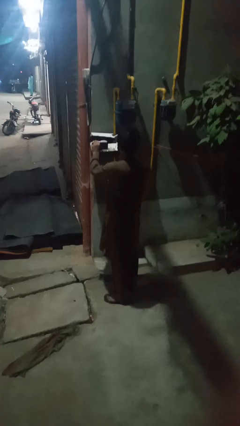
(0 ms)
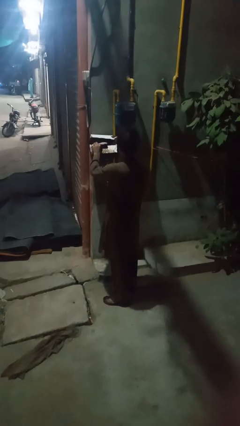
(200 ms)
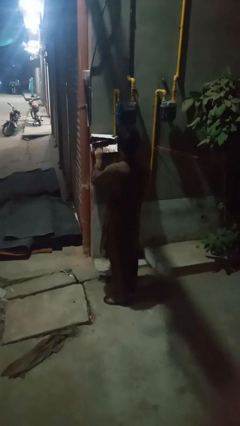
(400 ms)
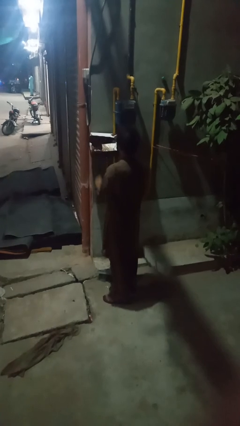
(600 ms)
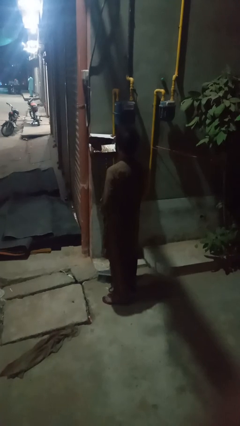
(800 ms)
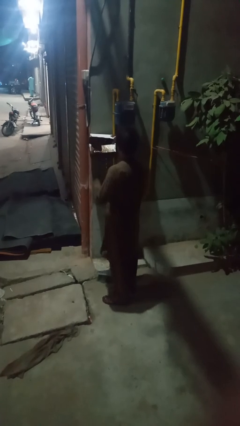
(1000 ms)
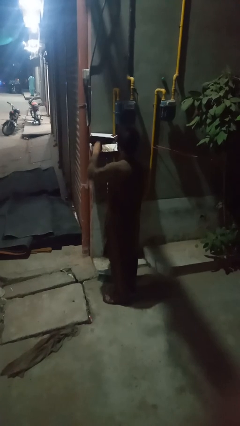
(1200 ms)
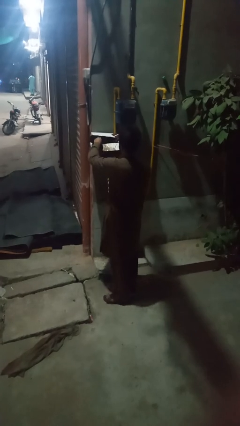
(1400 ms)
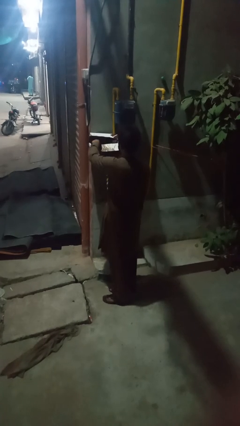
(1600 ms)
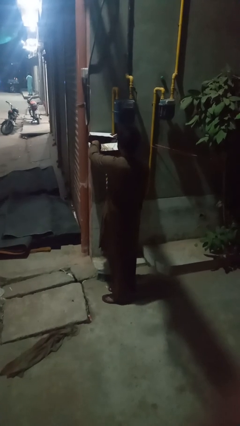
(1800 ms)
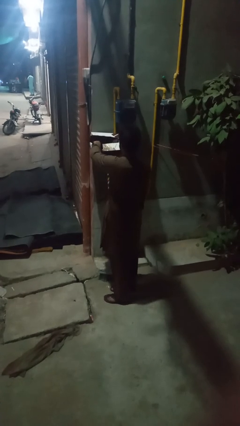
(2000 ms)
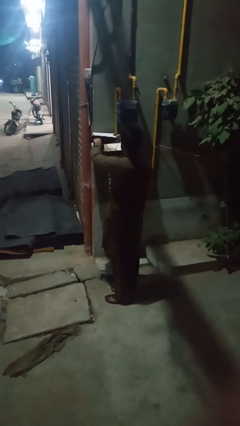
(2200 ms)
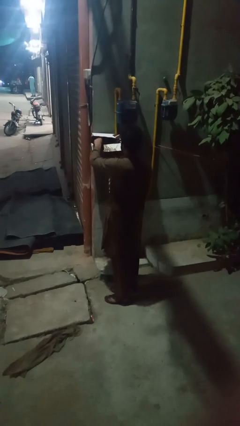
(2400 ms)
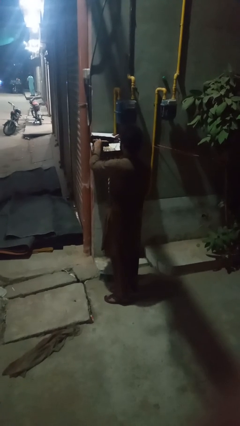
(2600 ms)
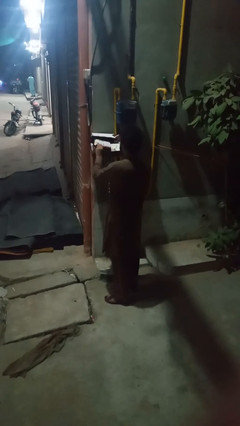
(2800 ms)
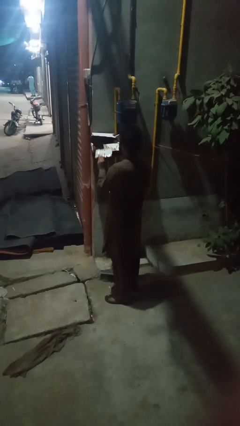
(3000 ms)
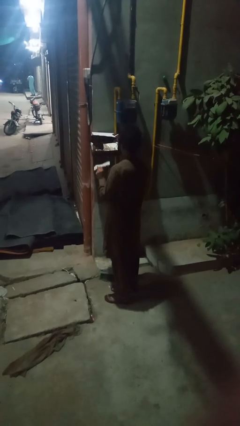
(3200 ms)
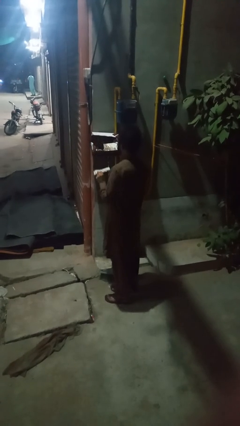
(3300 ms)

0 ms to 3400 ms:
person puts letters in mailbox

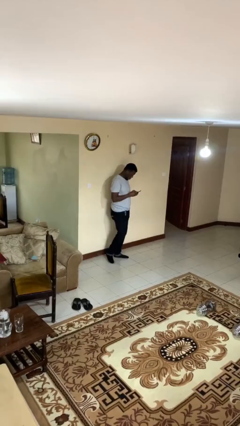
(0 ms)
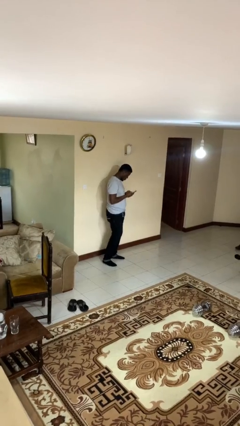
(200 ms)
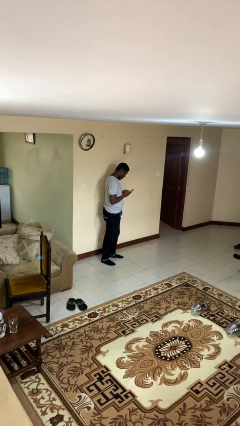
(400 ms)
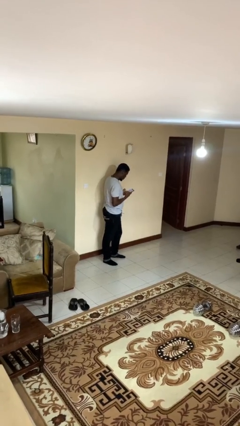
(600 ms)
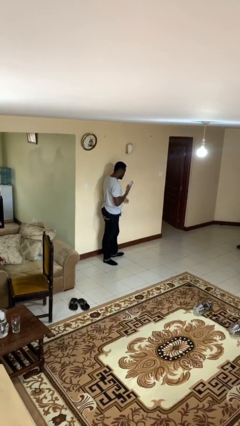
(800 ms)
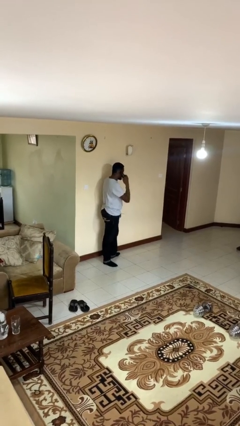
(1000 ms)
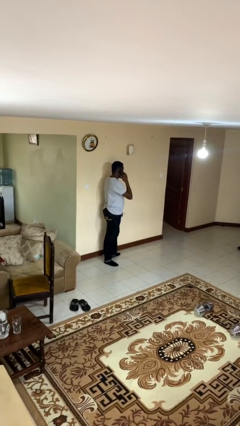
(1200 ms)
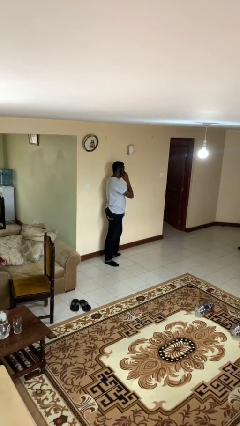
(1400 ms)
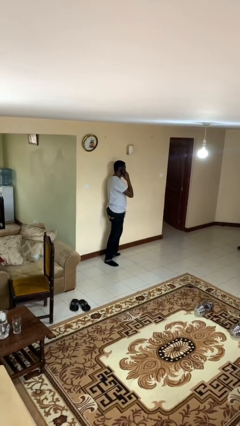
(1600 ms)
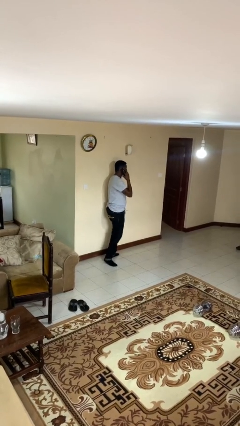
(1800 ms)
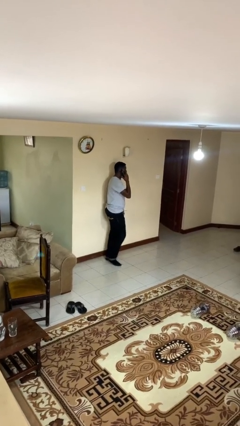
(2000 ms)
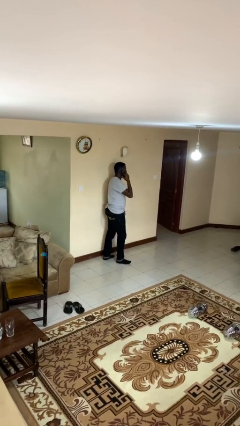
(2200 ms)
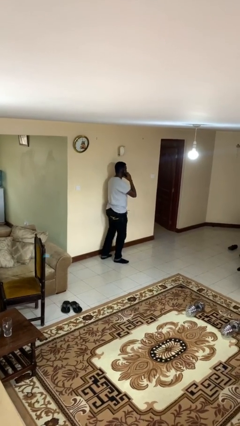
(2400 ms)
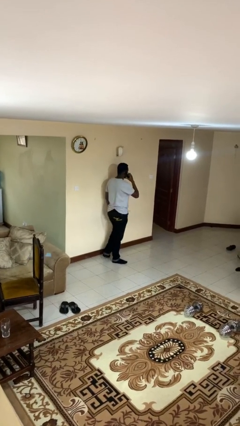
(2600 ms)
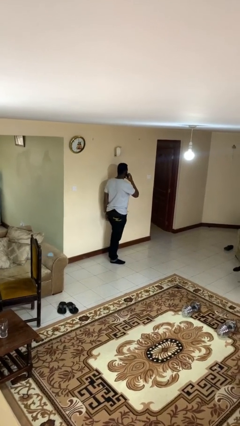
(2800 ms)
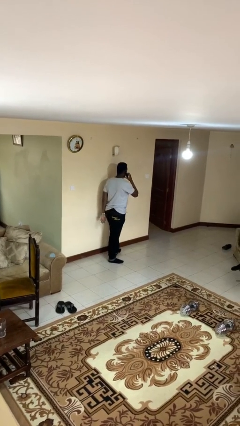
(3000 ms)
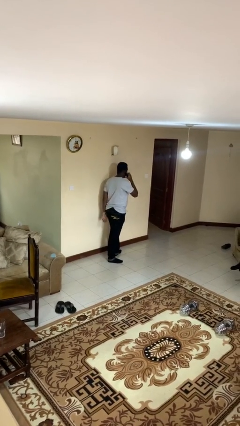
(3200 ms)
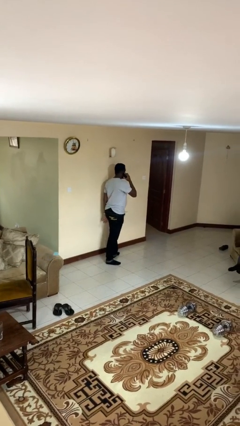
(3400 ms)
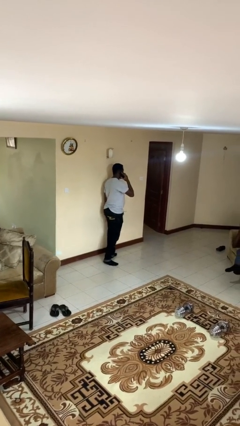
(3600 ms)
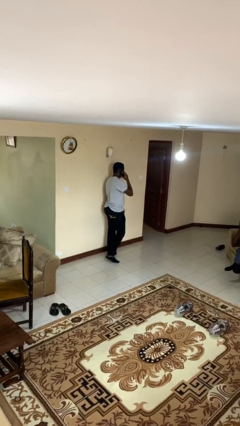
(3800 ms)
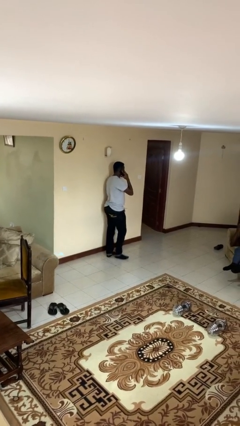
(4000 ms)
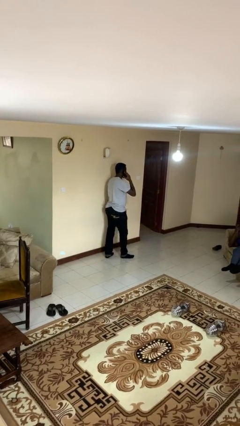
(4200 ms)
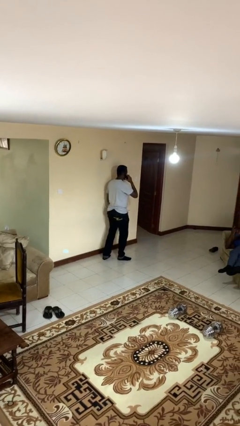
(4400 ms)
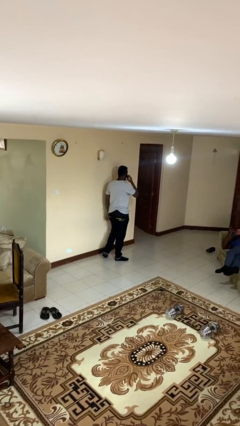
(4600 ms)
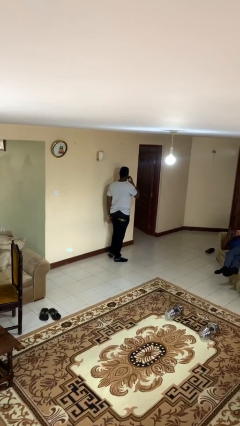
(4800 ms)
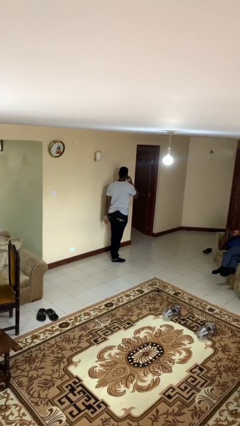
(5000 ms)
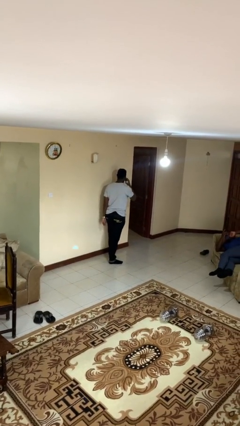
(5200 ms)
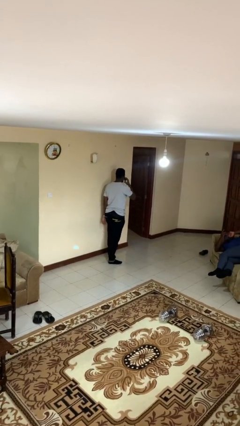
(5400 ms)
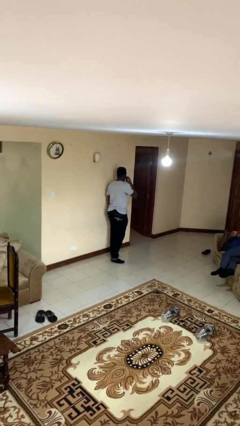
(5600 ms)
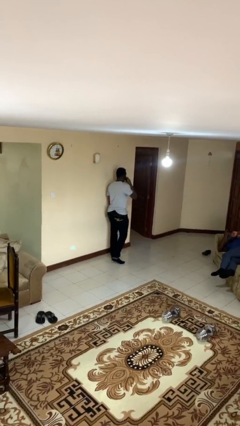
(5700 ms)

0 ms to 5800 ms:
person talks on phone

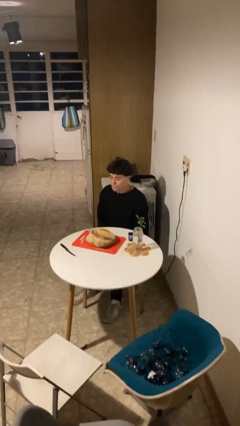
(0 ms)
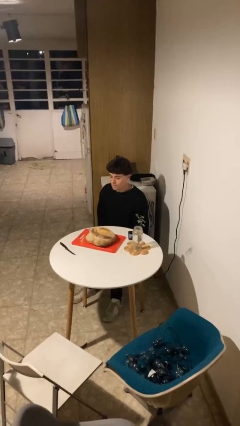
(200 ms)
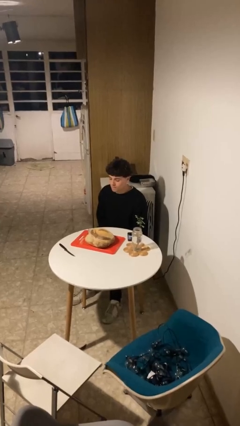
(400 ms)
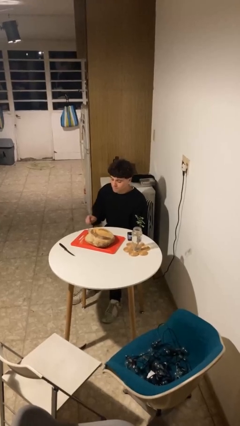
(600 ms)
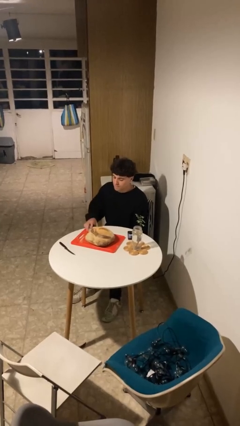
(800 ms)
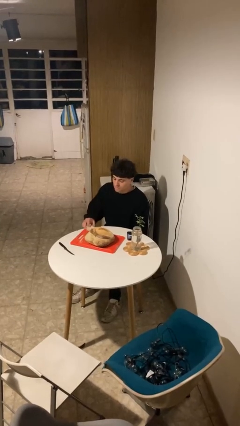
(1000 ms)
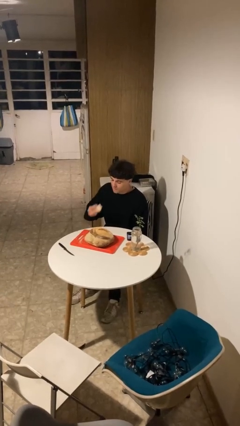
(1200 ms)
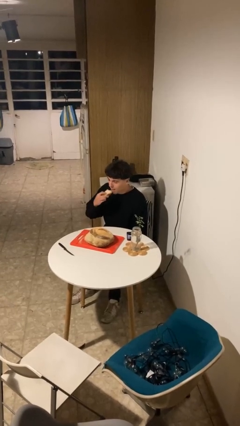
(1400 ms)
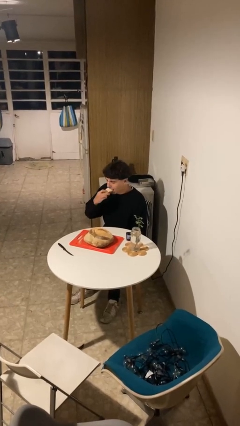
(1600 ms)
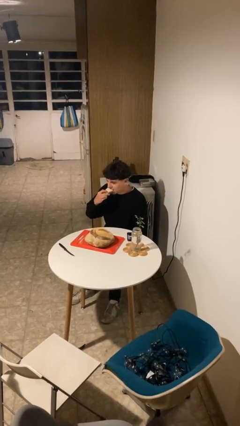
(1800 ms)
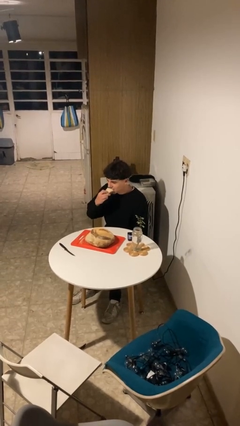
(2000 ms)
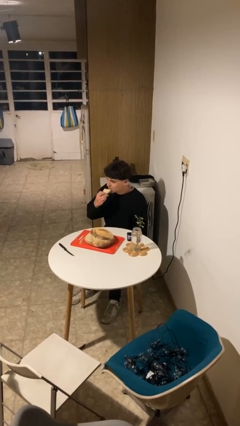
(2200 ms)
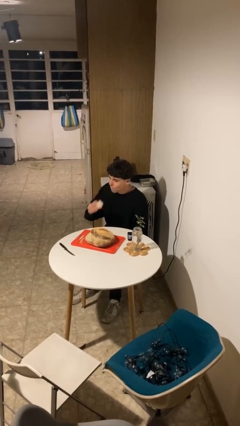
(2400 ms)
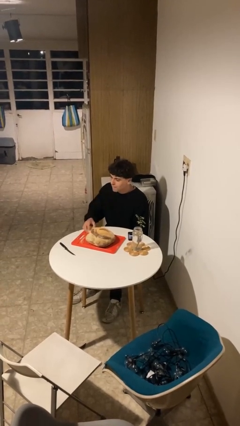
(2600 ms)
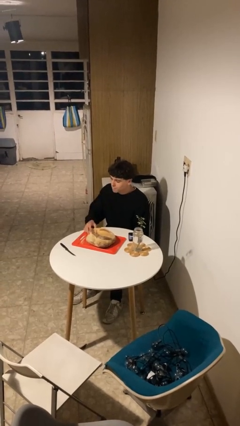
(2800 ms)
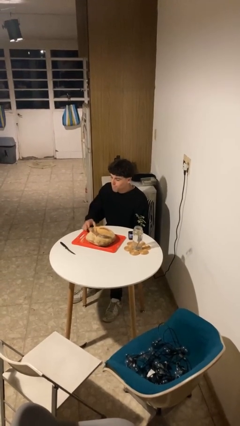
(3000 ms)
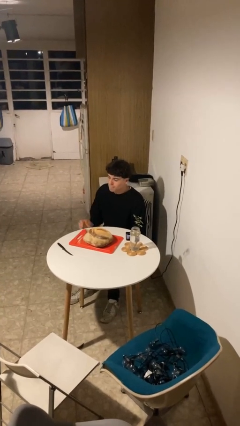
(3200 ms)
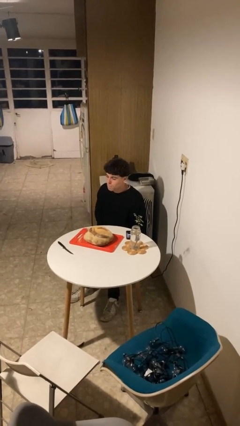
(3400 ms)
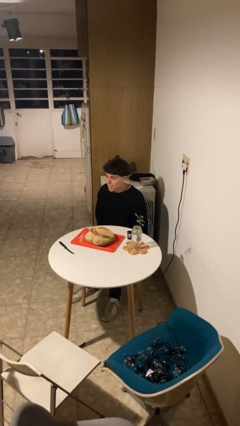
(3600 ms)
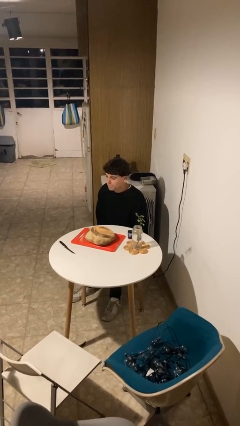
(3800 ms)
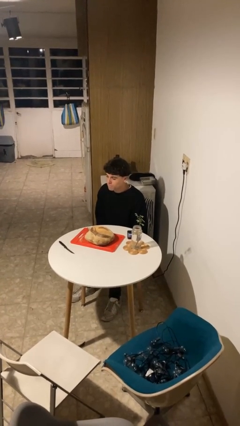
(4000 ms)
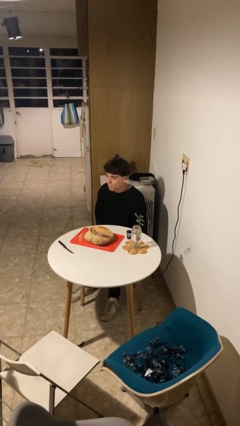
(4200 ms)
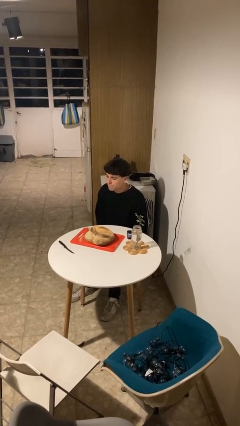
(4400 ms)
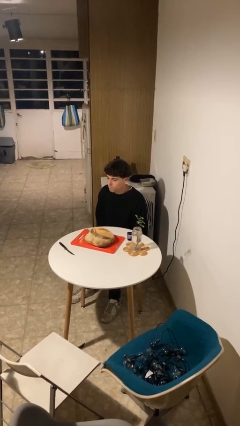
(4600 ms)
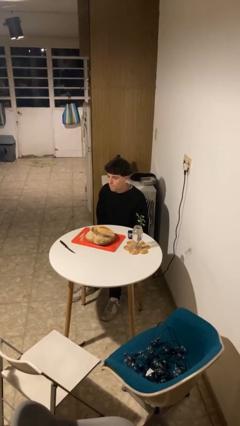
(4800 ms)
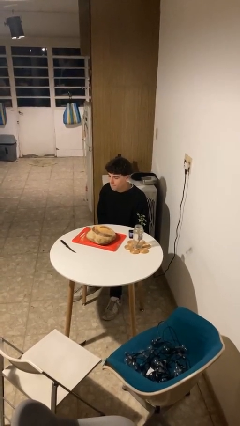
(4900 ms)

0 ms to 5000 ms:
person eats with hands

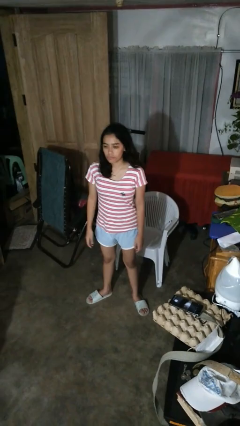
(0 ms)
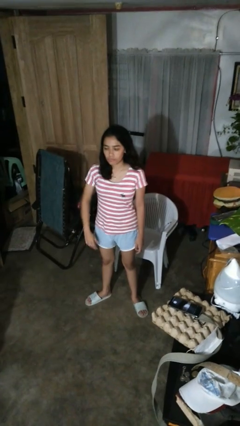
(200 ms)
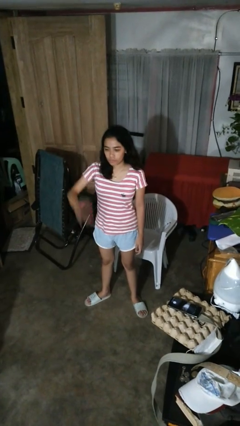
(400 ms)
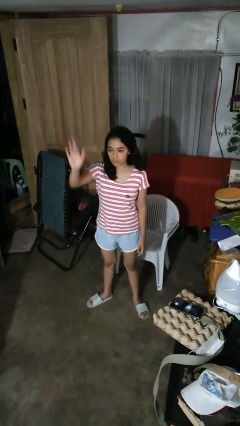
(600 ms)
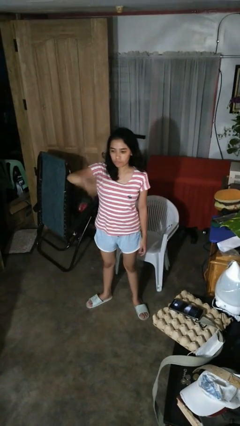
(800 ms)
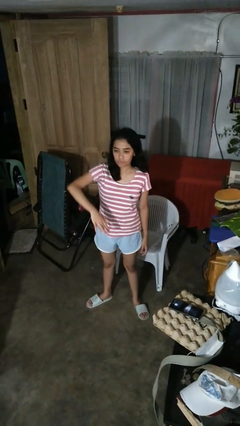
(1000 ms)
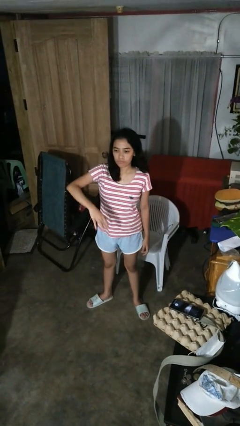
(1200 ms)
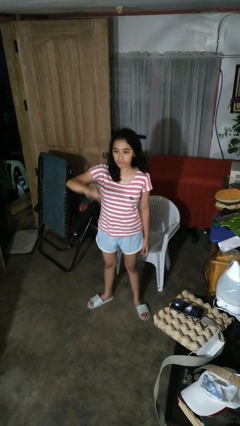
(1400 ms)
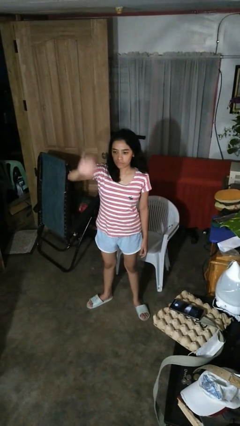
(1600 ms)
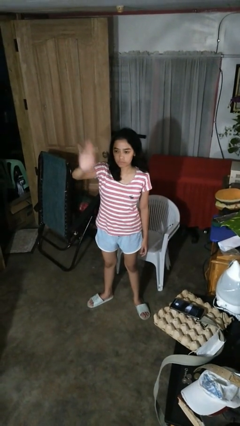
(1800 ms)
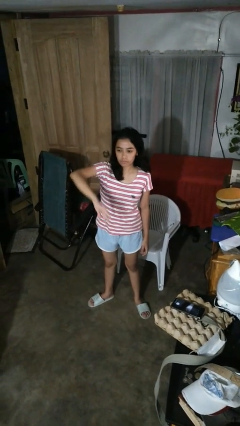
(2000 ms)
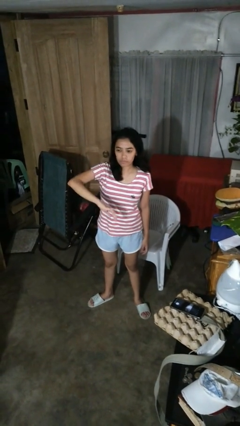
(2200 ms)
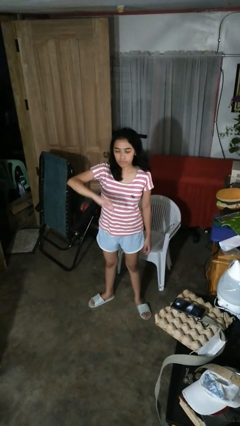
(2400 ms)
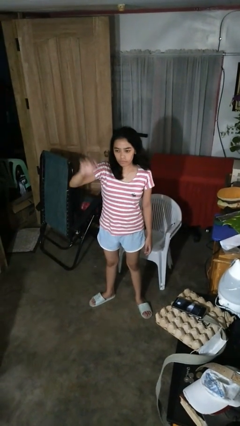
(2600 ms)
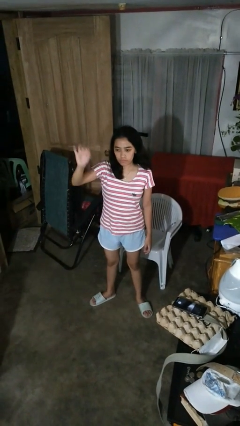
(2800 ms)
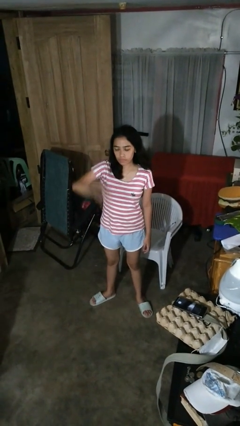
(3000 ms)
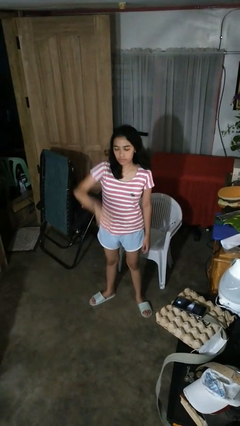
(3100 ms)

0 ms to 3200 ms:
person gestures swipe down

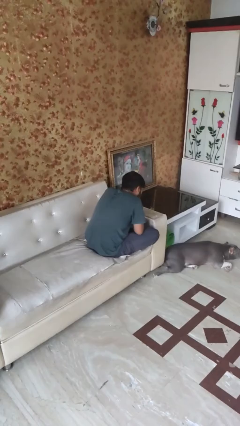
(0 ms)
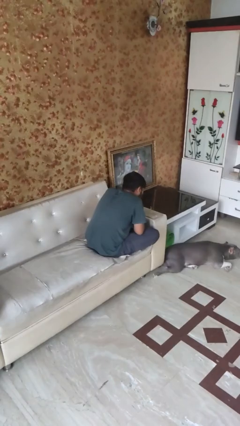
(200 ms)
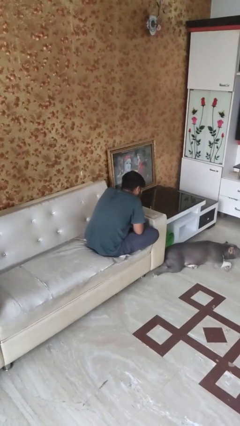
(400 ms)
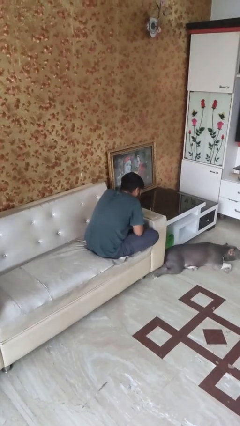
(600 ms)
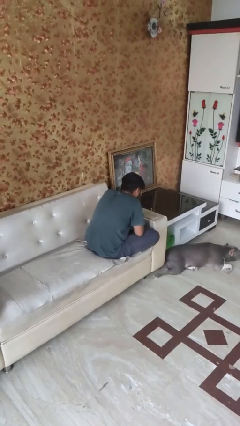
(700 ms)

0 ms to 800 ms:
person extinguishes candle
